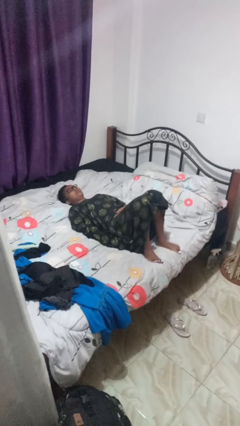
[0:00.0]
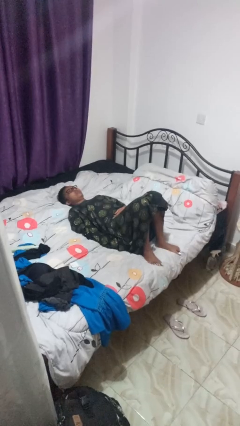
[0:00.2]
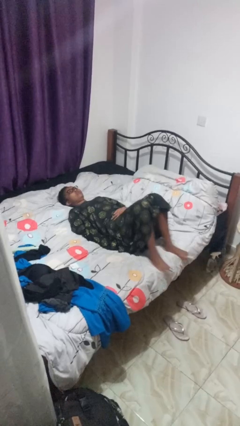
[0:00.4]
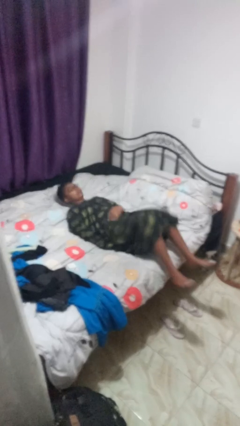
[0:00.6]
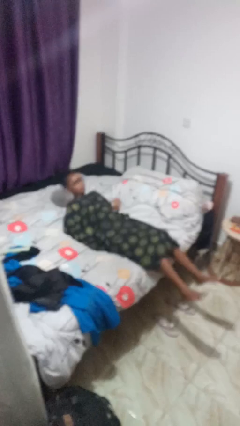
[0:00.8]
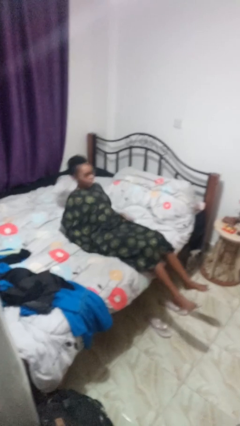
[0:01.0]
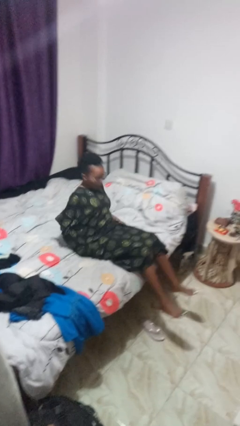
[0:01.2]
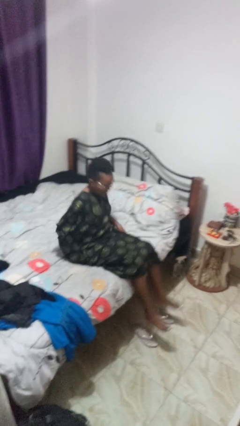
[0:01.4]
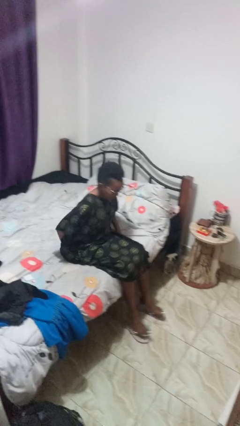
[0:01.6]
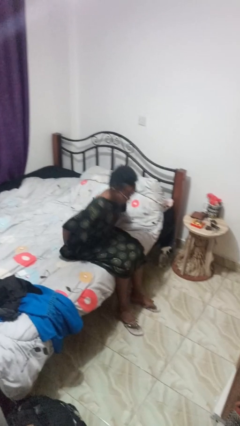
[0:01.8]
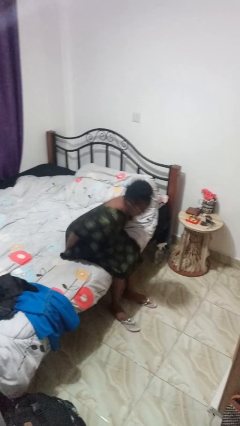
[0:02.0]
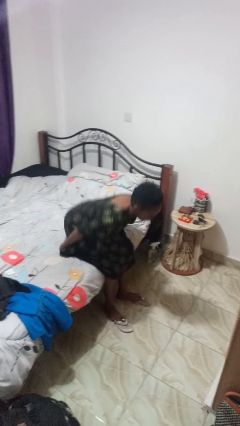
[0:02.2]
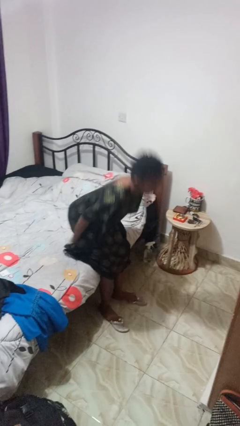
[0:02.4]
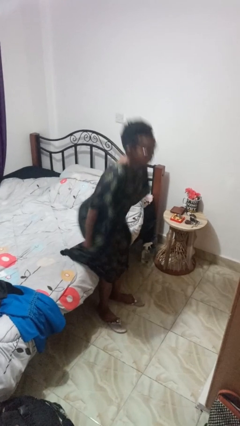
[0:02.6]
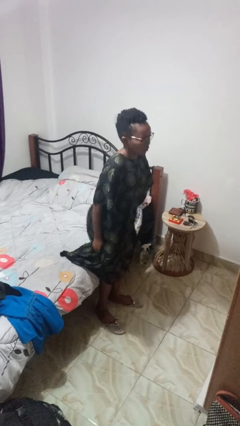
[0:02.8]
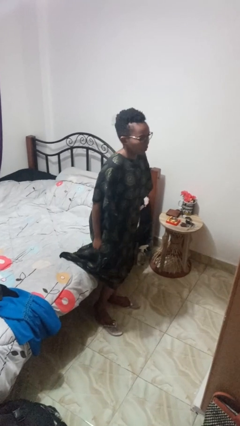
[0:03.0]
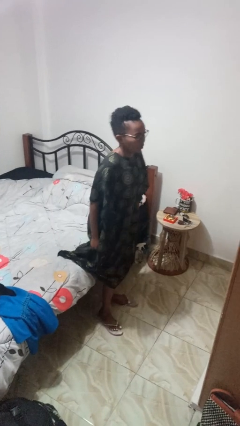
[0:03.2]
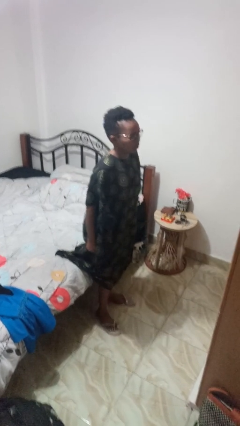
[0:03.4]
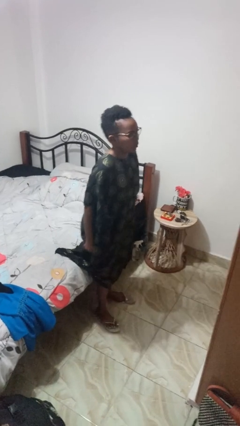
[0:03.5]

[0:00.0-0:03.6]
person stands up

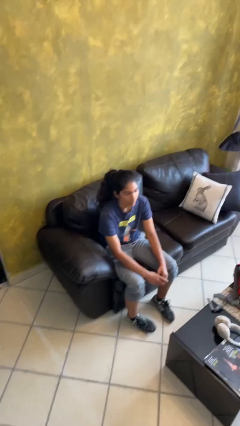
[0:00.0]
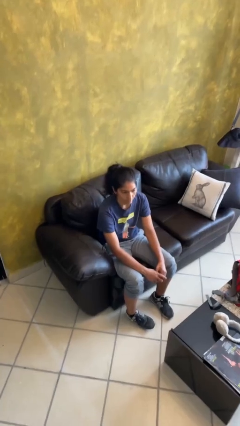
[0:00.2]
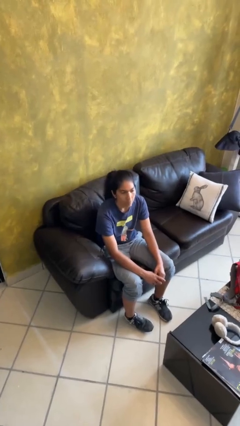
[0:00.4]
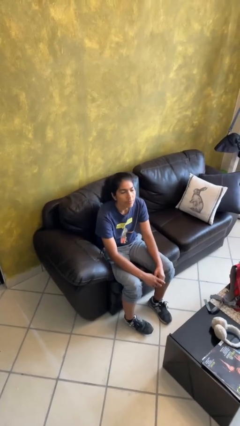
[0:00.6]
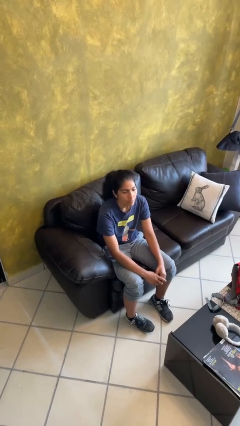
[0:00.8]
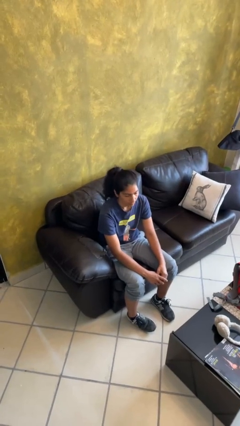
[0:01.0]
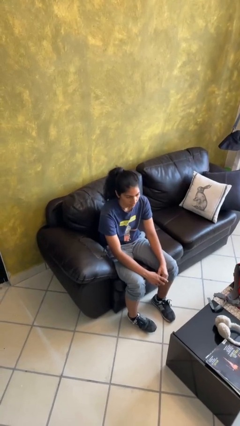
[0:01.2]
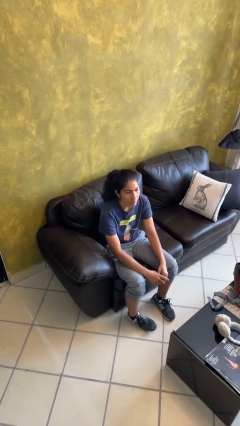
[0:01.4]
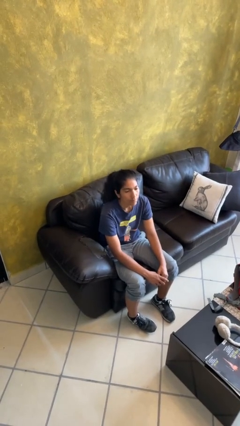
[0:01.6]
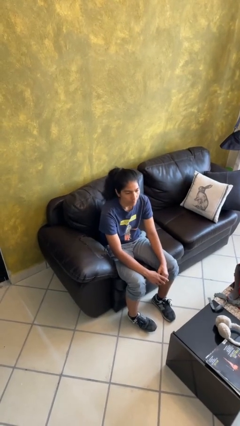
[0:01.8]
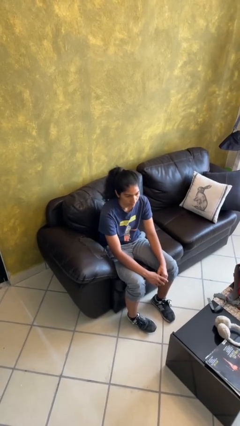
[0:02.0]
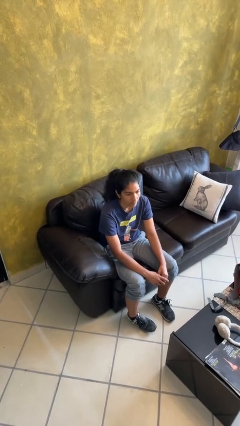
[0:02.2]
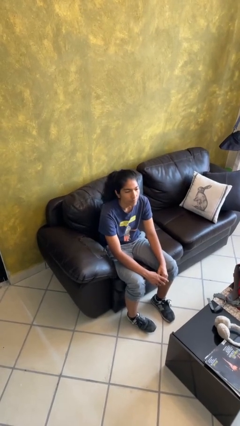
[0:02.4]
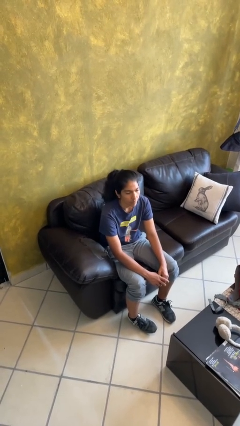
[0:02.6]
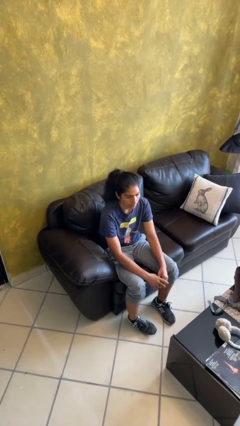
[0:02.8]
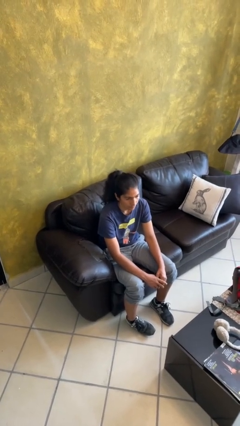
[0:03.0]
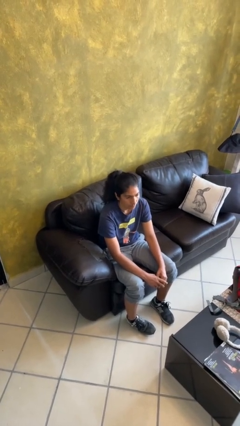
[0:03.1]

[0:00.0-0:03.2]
person nods head

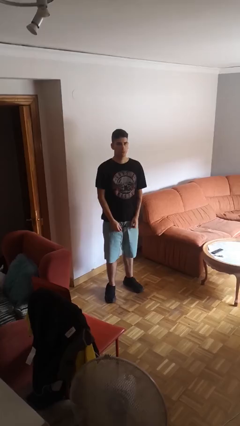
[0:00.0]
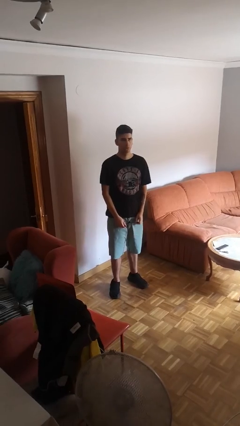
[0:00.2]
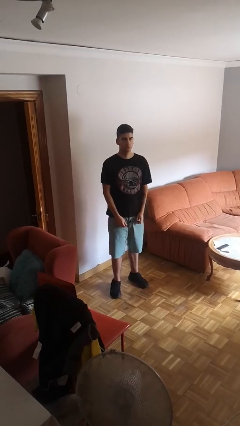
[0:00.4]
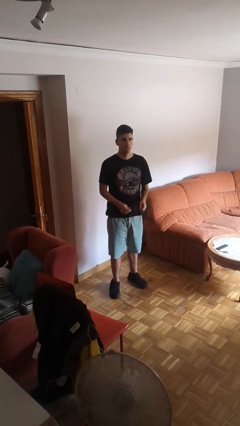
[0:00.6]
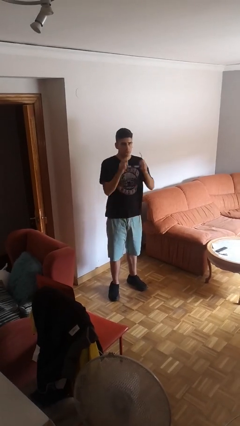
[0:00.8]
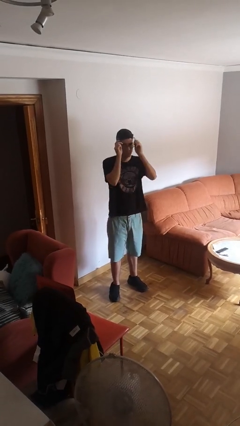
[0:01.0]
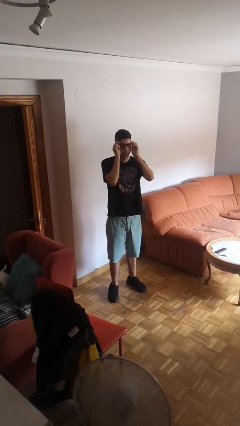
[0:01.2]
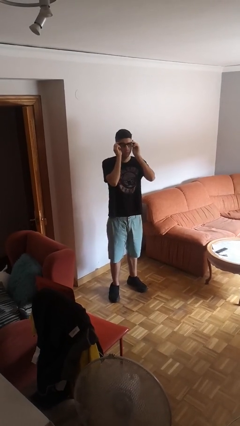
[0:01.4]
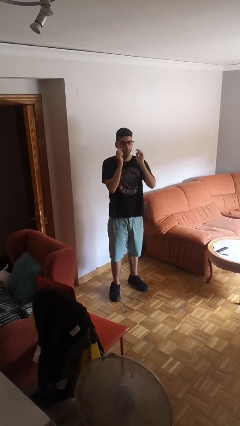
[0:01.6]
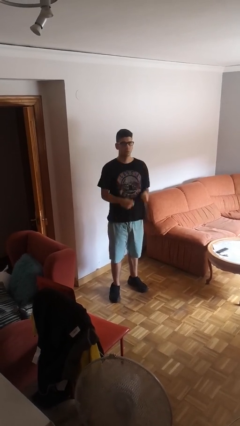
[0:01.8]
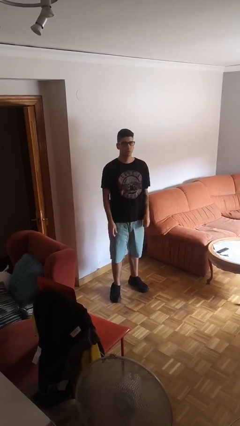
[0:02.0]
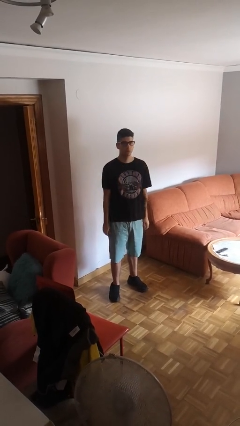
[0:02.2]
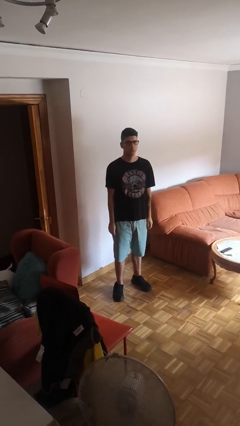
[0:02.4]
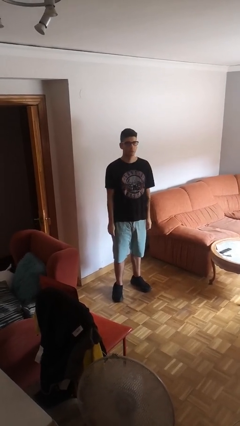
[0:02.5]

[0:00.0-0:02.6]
person puts on glasses

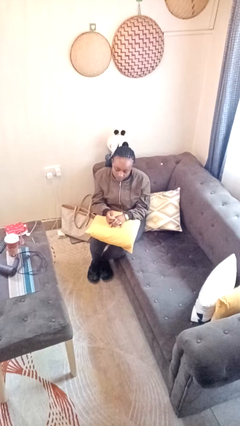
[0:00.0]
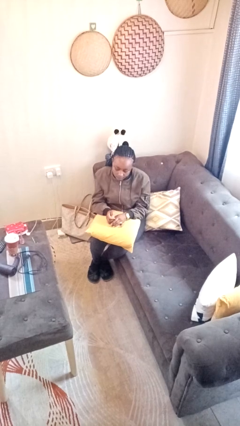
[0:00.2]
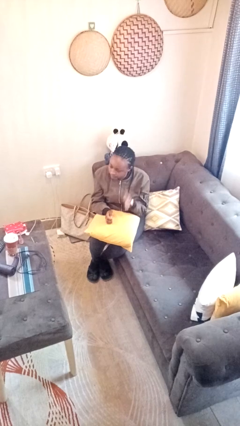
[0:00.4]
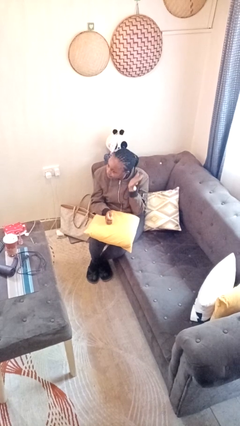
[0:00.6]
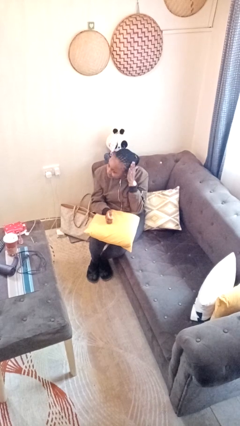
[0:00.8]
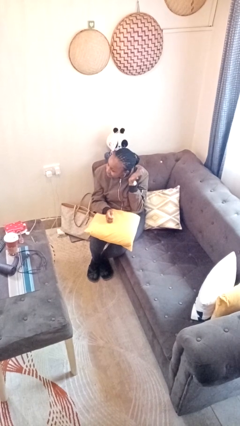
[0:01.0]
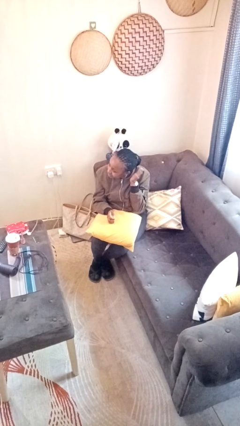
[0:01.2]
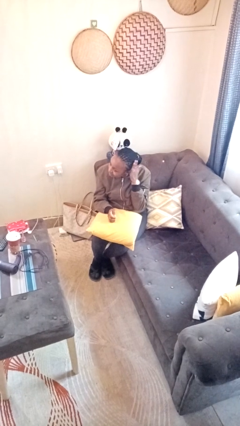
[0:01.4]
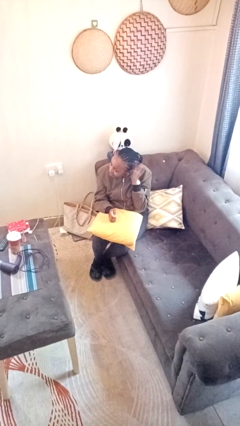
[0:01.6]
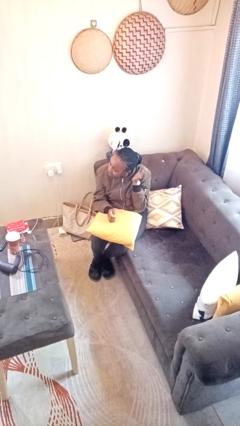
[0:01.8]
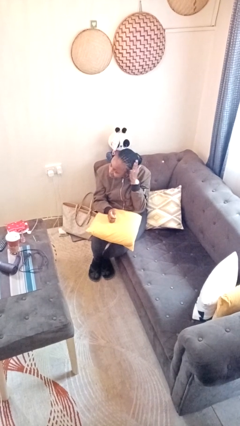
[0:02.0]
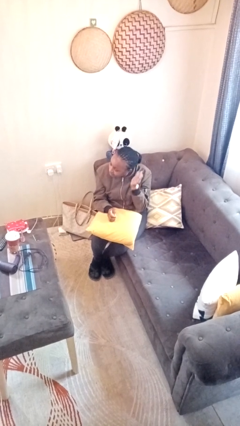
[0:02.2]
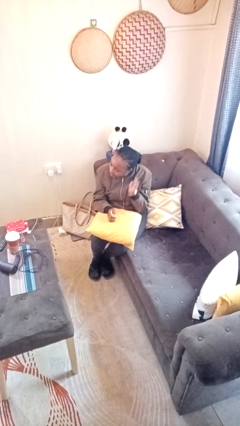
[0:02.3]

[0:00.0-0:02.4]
person pats head

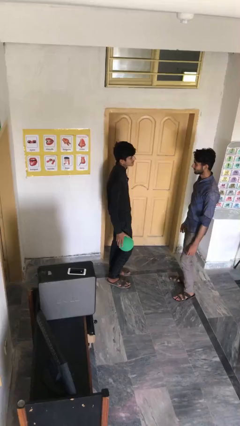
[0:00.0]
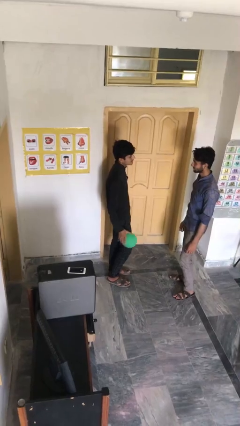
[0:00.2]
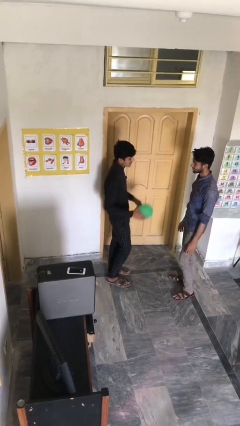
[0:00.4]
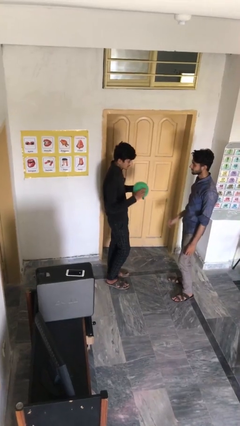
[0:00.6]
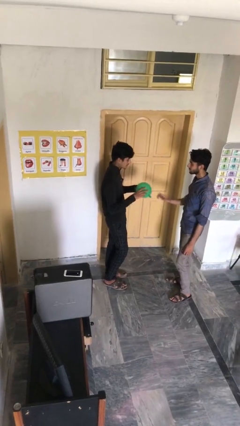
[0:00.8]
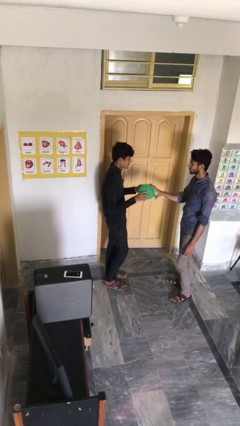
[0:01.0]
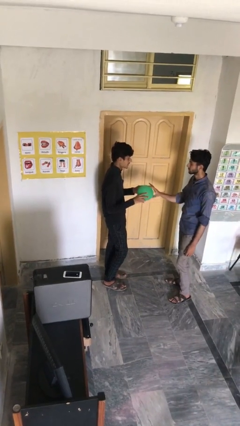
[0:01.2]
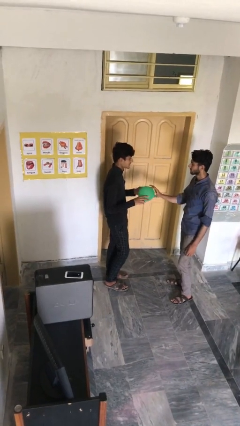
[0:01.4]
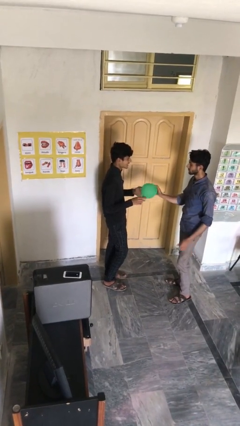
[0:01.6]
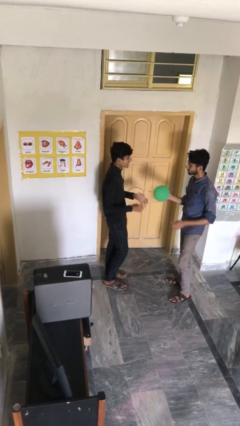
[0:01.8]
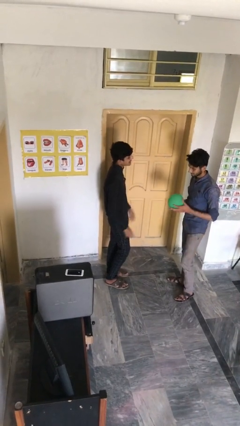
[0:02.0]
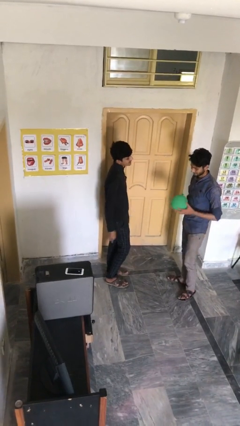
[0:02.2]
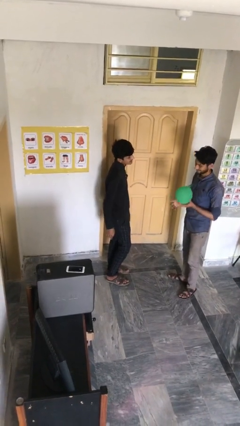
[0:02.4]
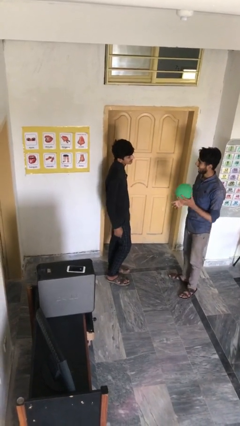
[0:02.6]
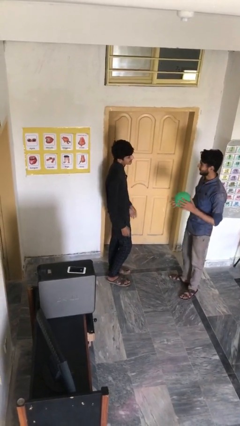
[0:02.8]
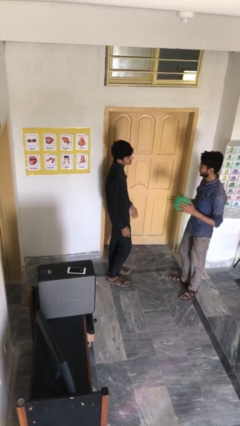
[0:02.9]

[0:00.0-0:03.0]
person transfers object to person

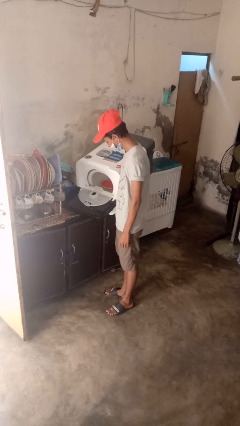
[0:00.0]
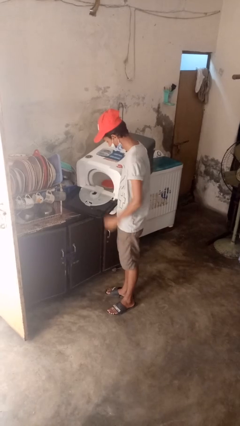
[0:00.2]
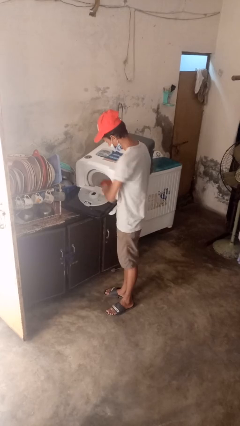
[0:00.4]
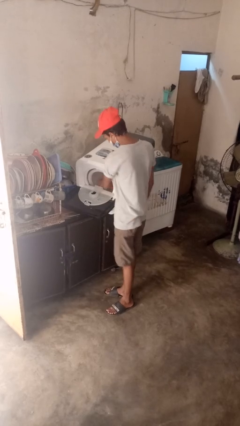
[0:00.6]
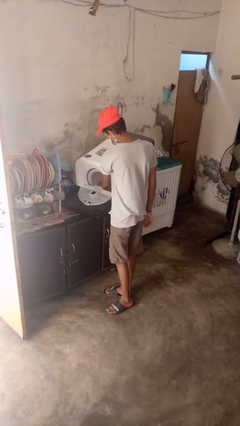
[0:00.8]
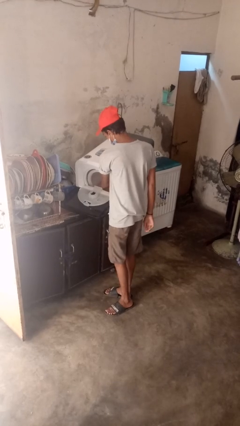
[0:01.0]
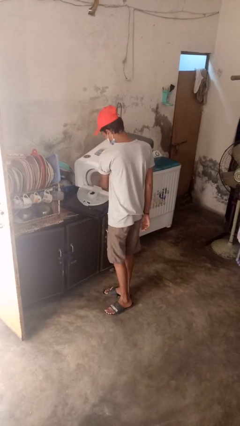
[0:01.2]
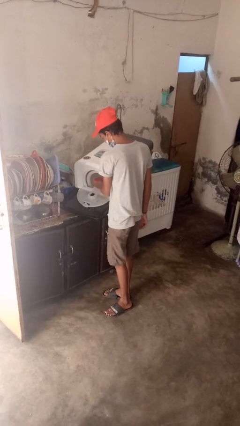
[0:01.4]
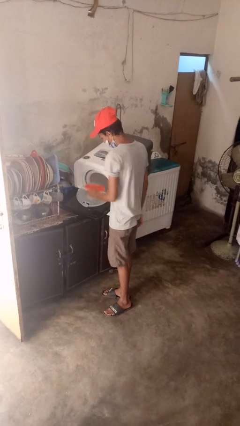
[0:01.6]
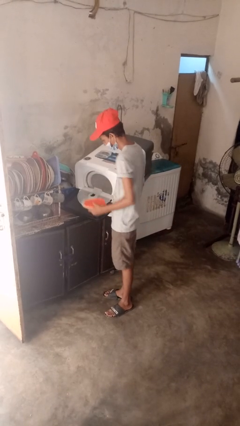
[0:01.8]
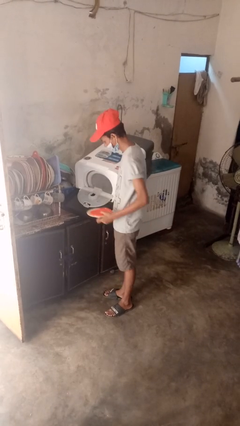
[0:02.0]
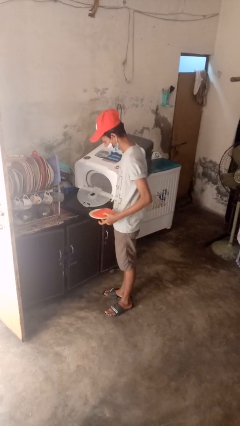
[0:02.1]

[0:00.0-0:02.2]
person unloads dishwasher

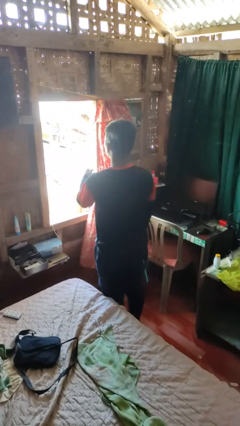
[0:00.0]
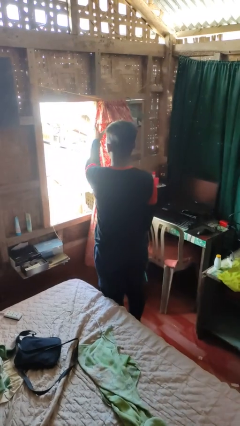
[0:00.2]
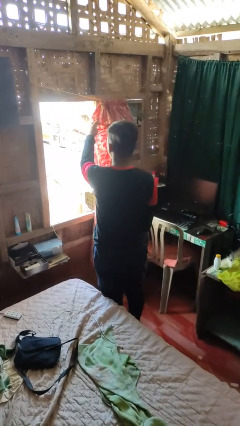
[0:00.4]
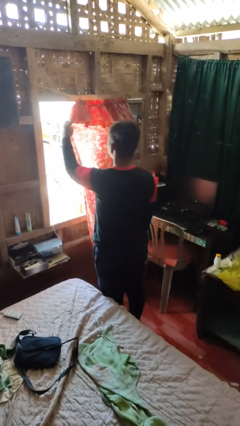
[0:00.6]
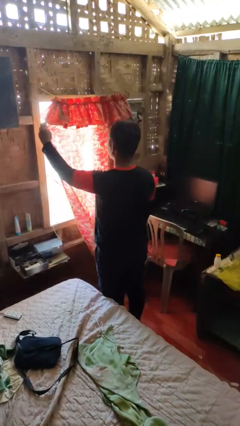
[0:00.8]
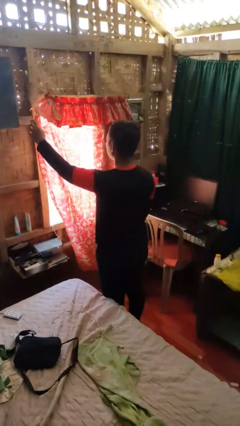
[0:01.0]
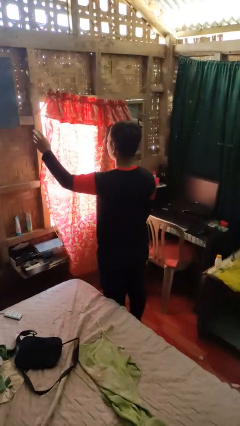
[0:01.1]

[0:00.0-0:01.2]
person closes curtains
